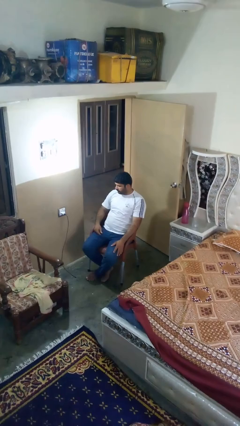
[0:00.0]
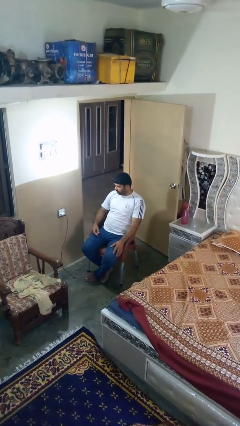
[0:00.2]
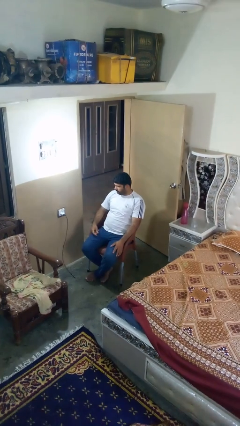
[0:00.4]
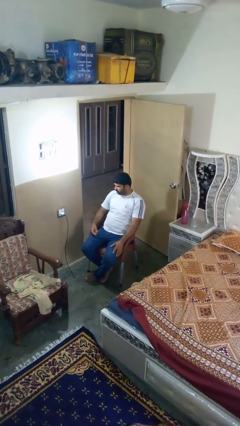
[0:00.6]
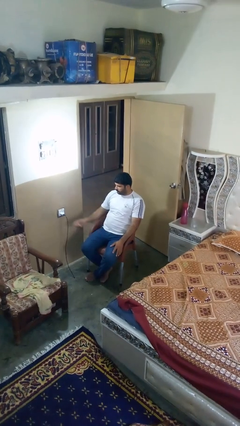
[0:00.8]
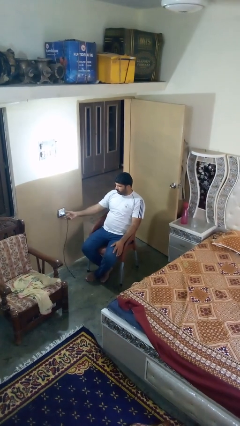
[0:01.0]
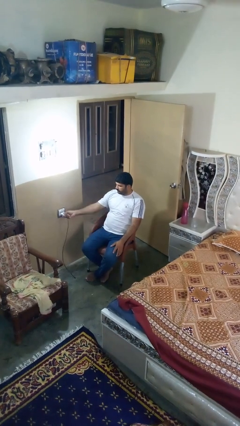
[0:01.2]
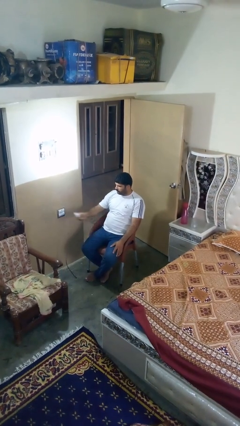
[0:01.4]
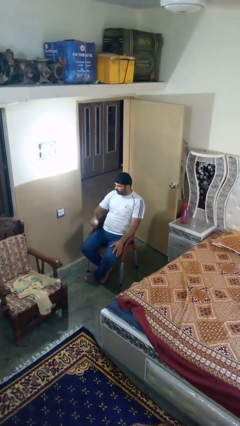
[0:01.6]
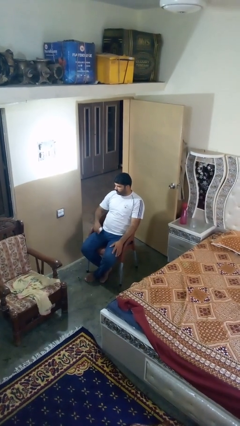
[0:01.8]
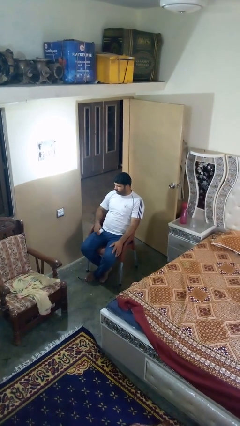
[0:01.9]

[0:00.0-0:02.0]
person unplugs from electrical socket

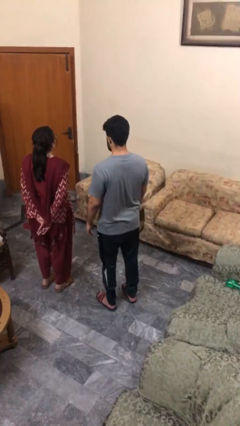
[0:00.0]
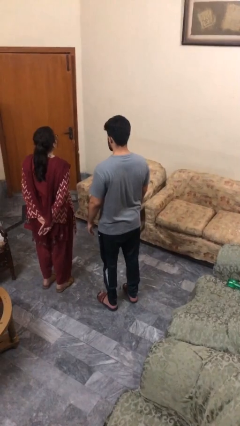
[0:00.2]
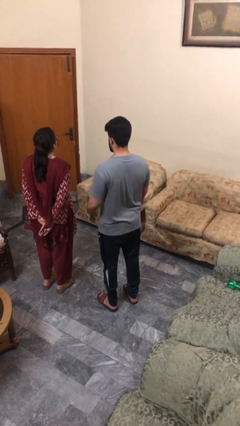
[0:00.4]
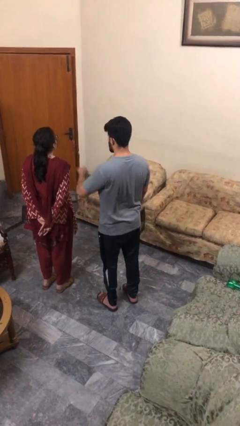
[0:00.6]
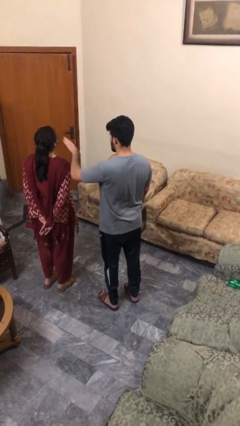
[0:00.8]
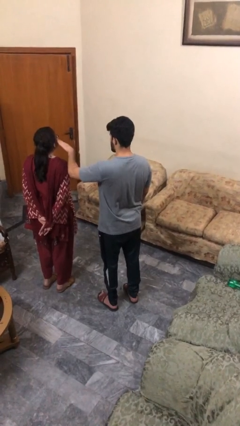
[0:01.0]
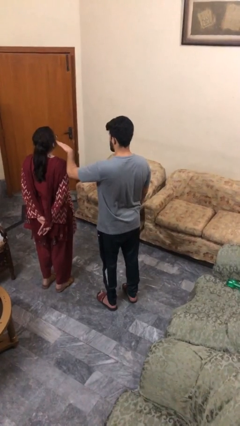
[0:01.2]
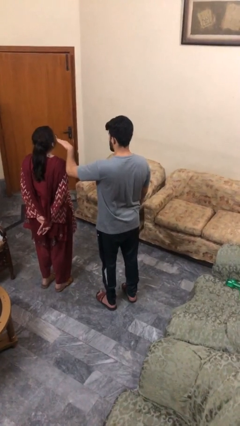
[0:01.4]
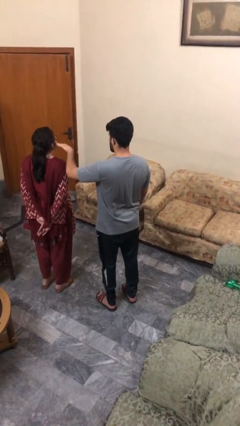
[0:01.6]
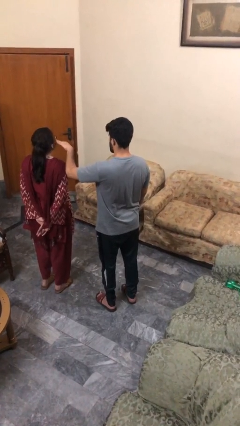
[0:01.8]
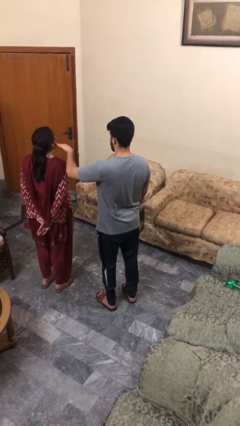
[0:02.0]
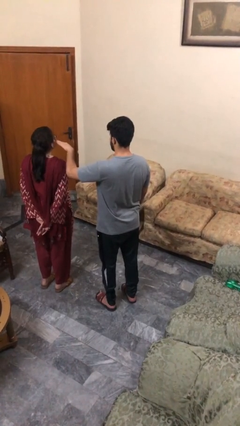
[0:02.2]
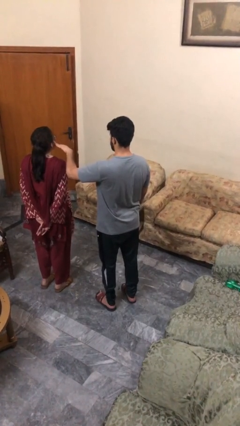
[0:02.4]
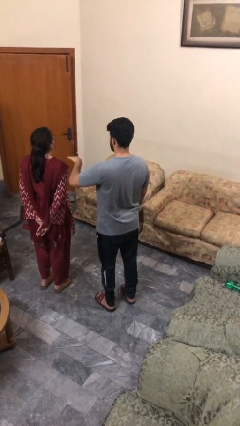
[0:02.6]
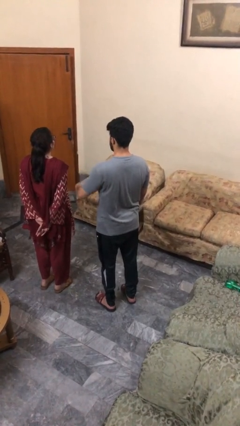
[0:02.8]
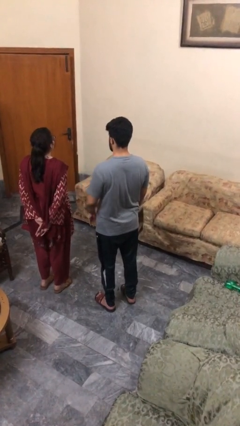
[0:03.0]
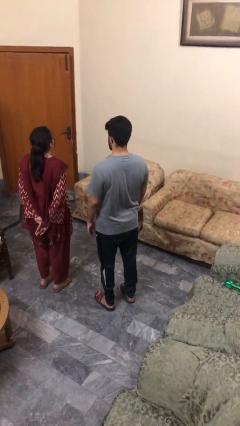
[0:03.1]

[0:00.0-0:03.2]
person touches face of person

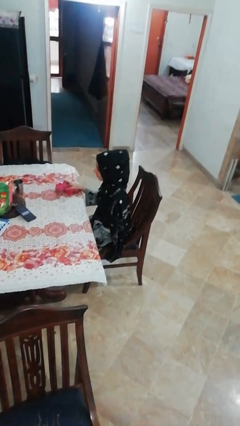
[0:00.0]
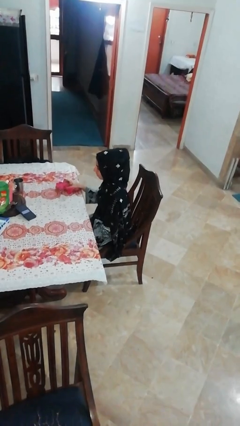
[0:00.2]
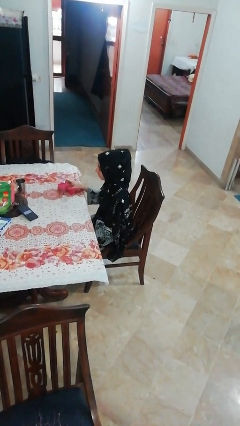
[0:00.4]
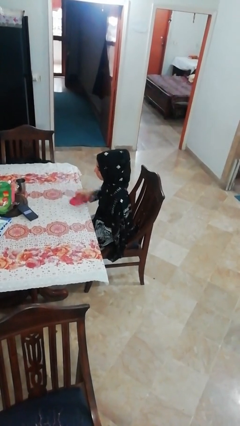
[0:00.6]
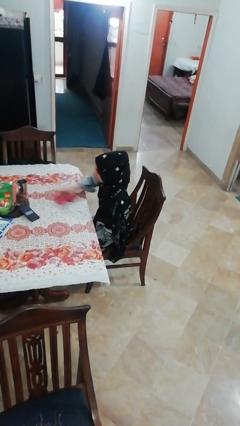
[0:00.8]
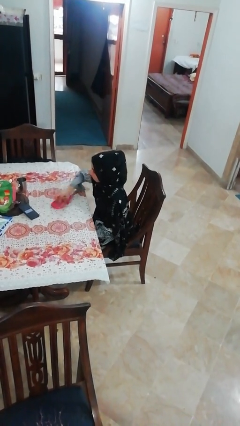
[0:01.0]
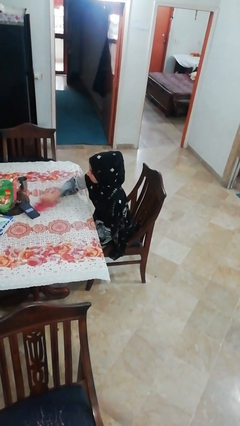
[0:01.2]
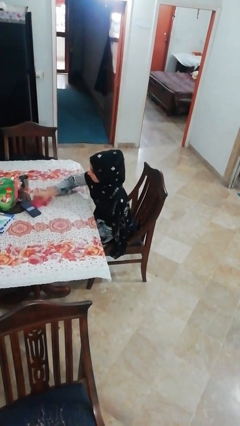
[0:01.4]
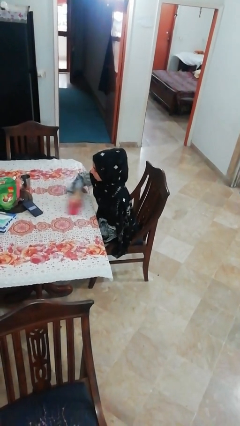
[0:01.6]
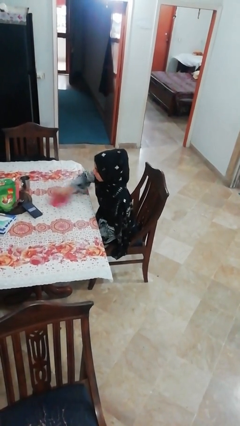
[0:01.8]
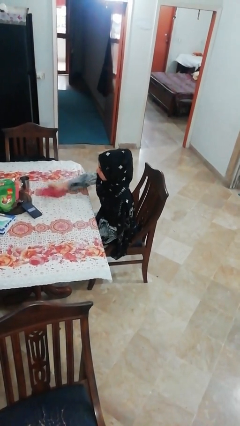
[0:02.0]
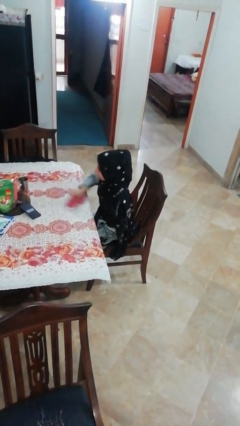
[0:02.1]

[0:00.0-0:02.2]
person cleans table with rag

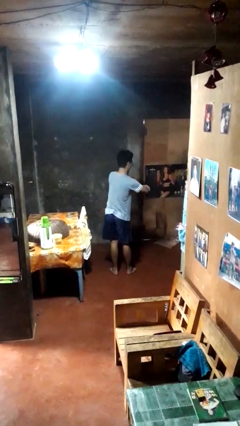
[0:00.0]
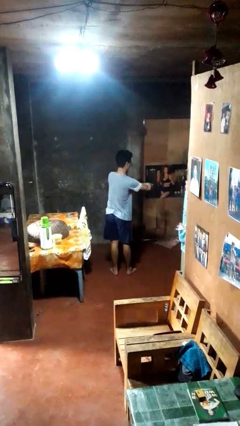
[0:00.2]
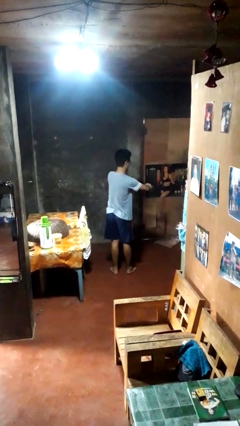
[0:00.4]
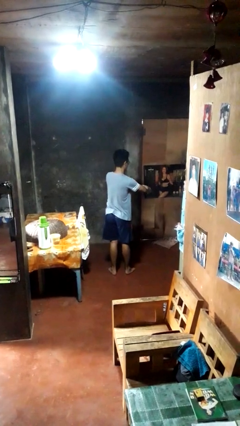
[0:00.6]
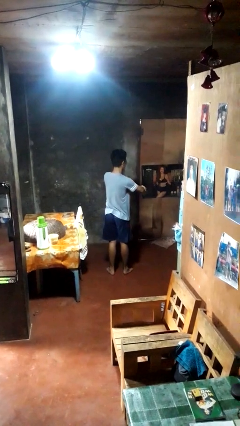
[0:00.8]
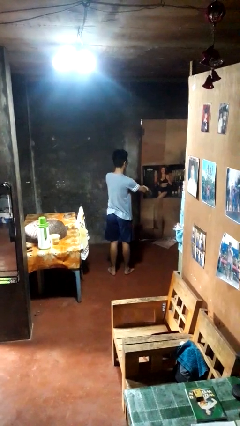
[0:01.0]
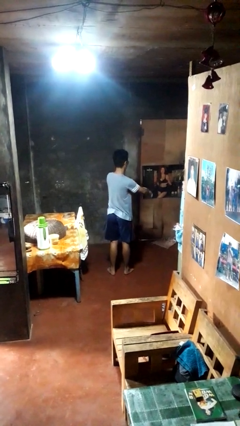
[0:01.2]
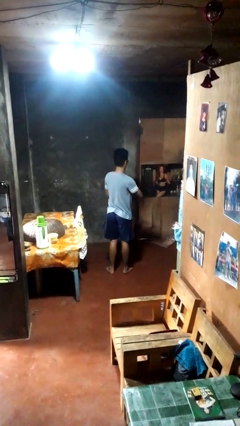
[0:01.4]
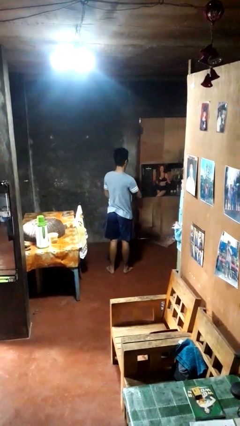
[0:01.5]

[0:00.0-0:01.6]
person swats bug

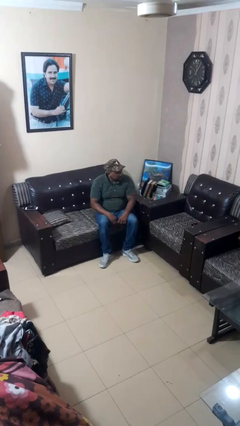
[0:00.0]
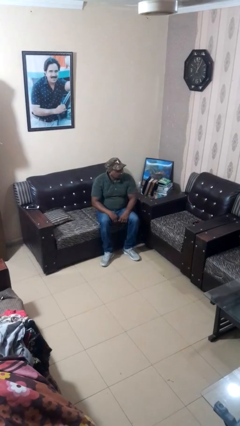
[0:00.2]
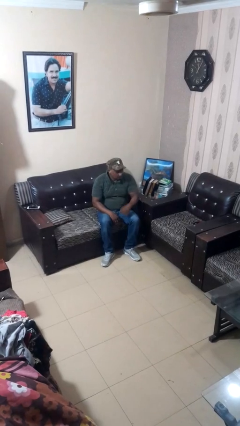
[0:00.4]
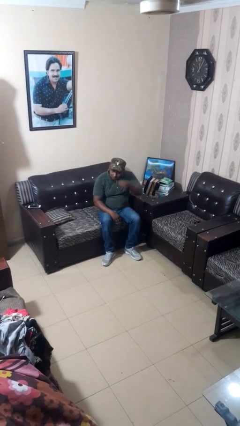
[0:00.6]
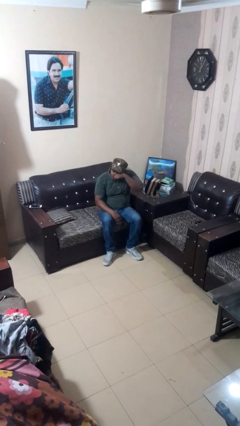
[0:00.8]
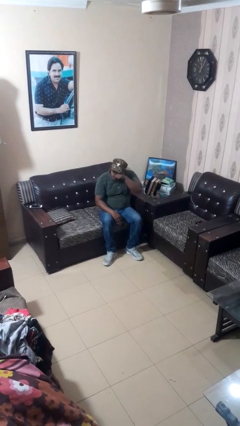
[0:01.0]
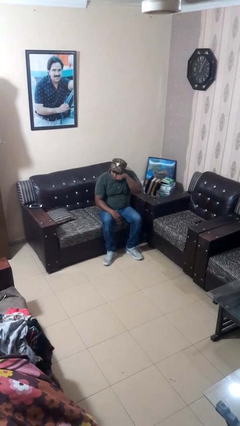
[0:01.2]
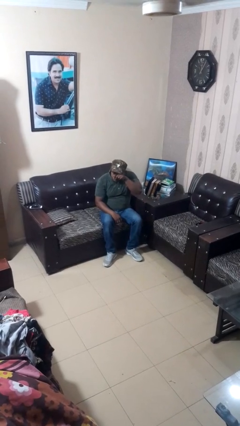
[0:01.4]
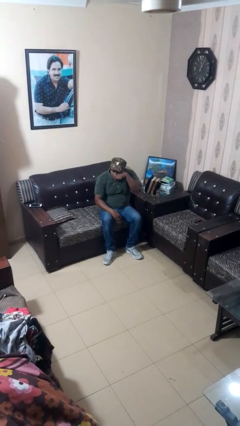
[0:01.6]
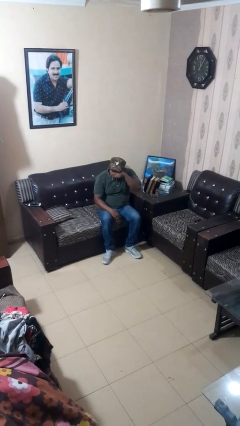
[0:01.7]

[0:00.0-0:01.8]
person rubs eyes

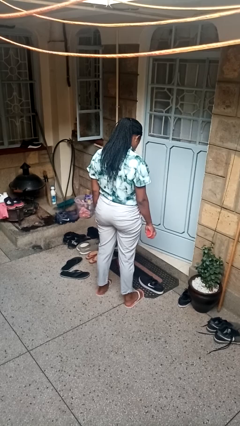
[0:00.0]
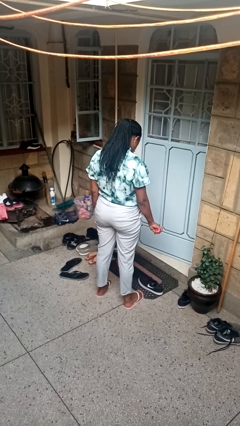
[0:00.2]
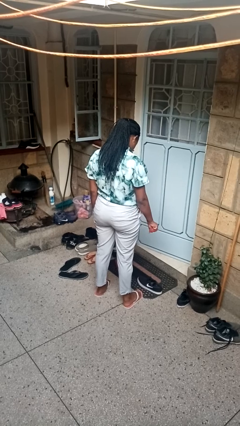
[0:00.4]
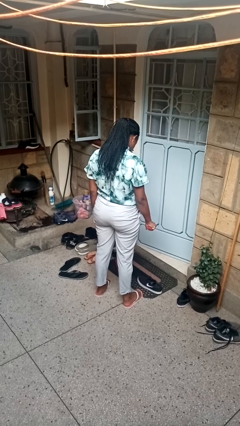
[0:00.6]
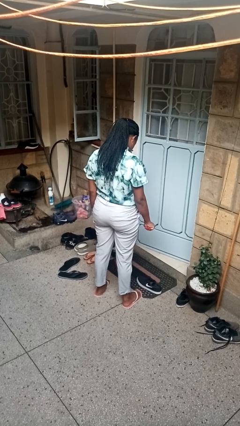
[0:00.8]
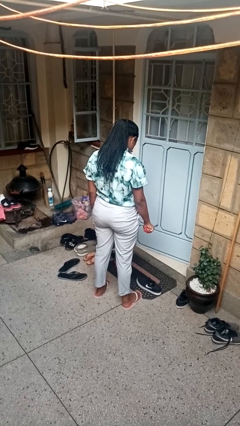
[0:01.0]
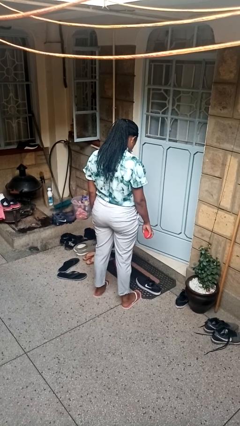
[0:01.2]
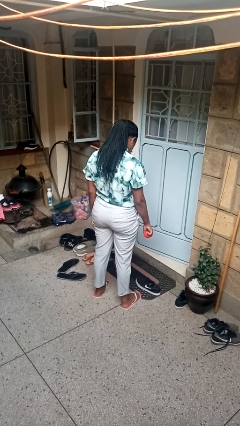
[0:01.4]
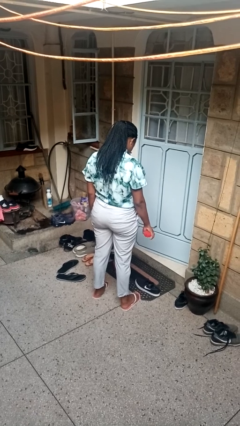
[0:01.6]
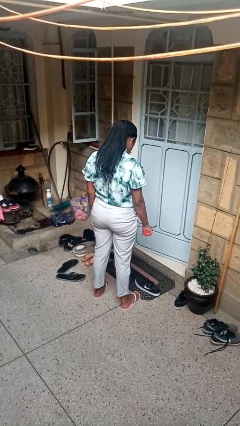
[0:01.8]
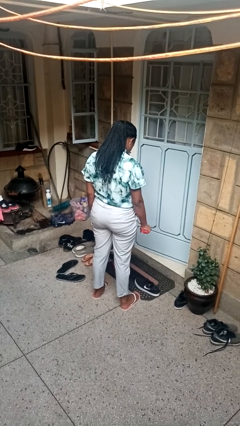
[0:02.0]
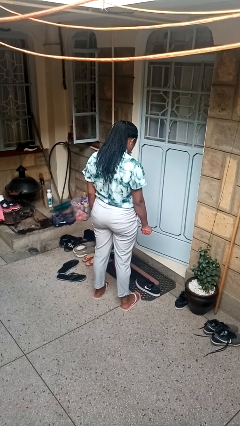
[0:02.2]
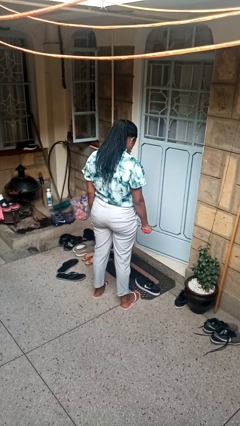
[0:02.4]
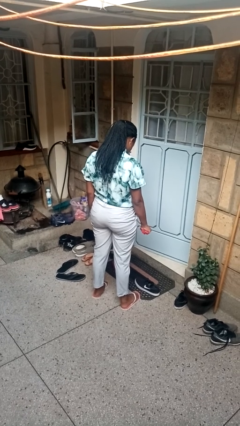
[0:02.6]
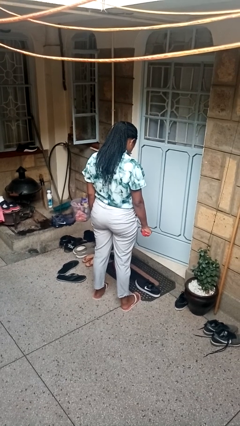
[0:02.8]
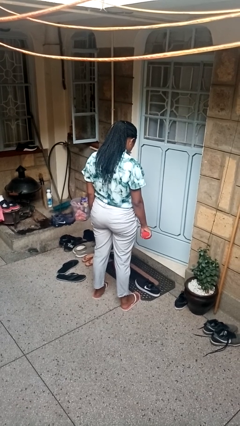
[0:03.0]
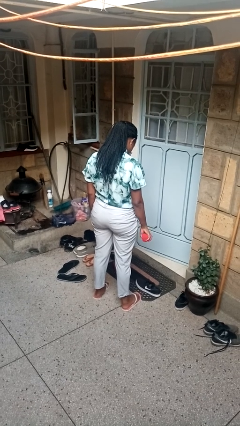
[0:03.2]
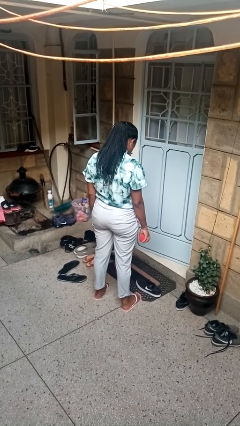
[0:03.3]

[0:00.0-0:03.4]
person squeezes object

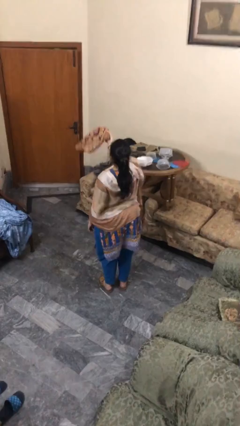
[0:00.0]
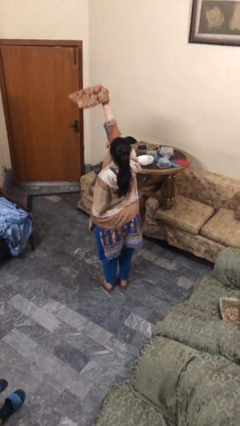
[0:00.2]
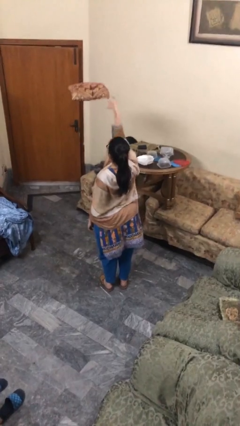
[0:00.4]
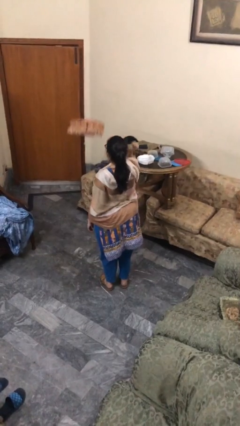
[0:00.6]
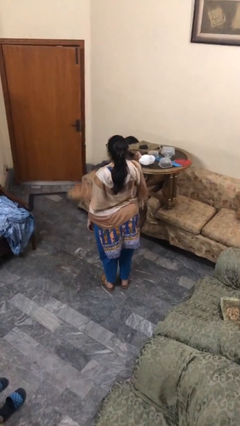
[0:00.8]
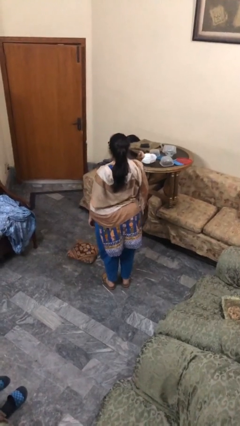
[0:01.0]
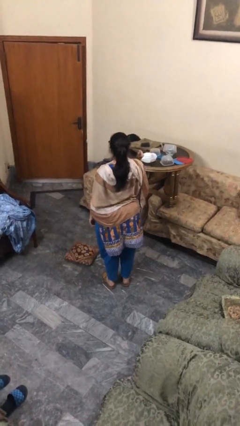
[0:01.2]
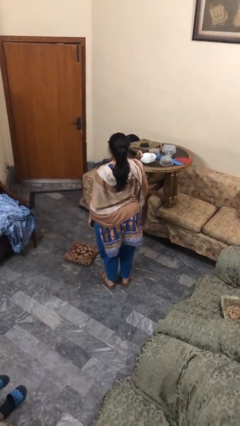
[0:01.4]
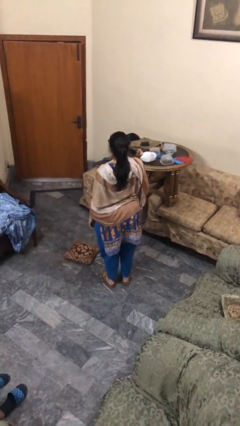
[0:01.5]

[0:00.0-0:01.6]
person drops object

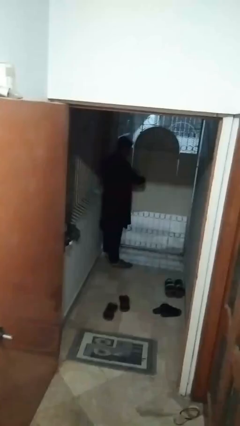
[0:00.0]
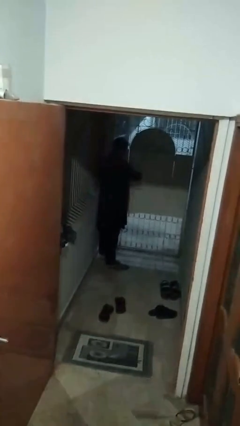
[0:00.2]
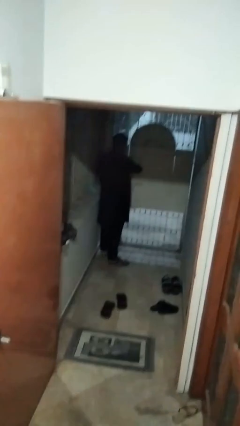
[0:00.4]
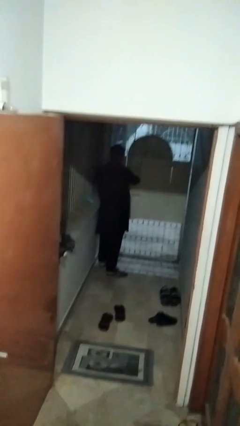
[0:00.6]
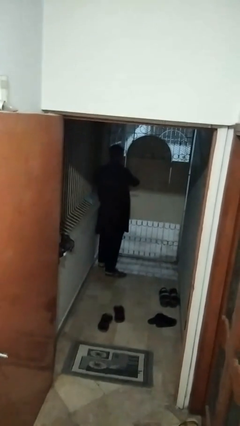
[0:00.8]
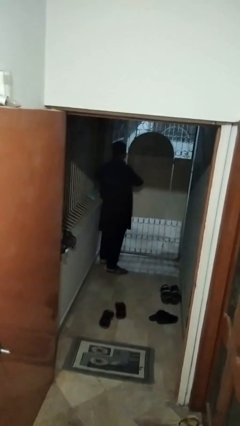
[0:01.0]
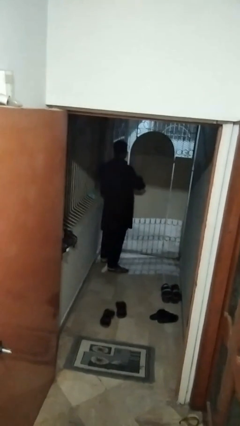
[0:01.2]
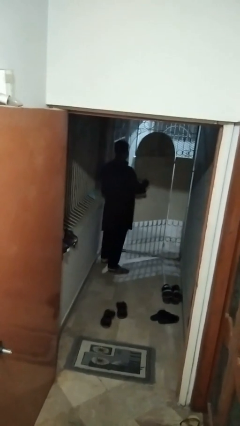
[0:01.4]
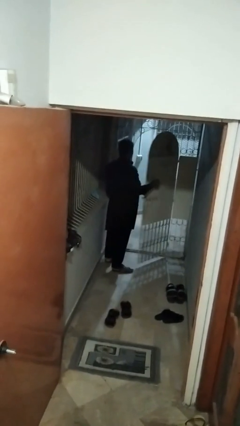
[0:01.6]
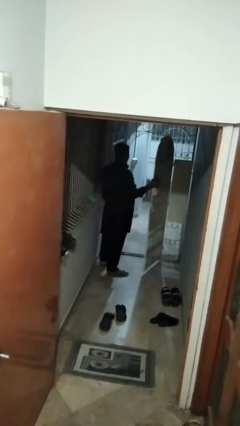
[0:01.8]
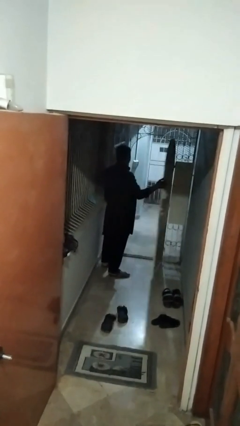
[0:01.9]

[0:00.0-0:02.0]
person opens gate
